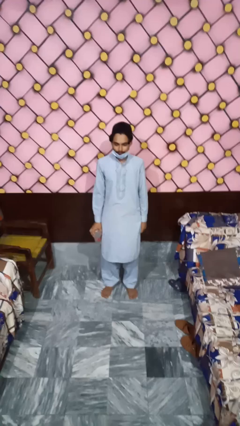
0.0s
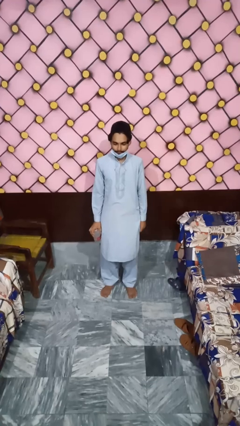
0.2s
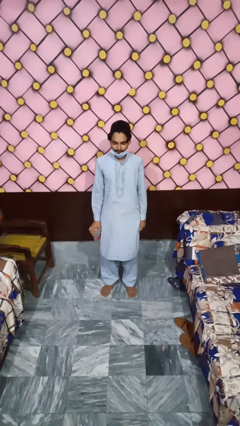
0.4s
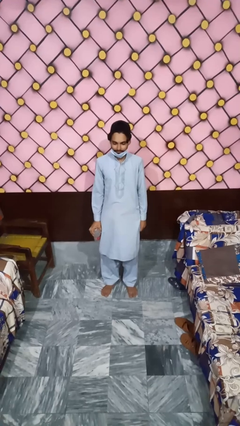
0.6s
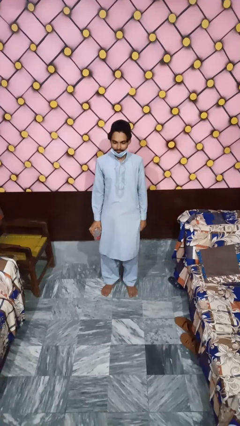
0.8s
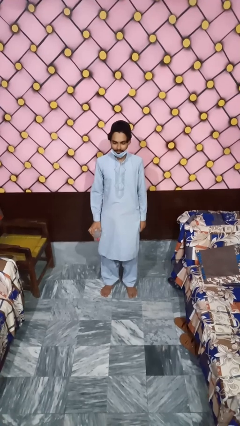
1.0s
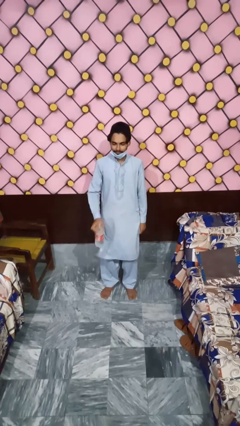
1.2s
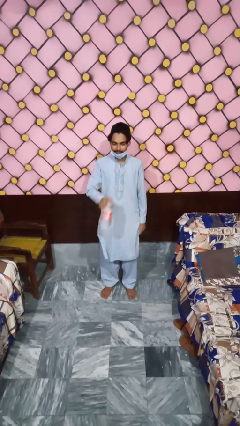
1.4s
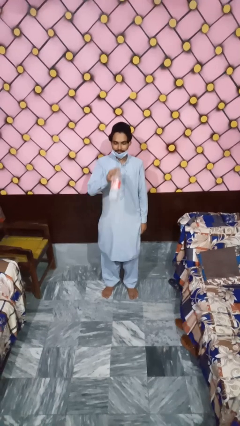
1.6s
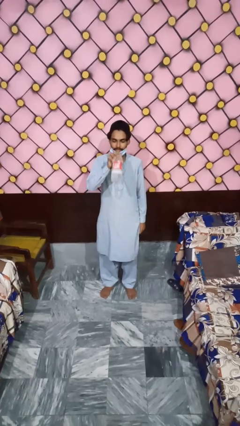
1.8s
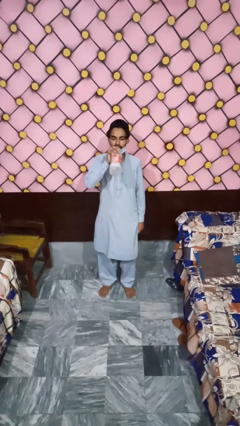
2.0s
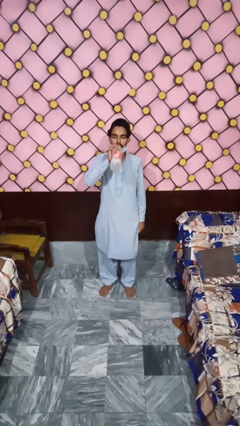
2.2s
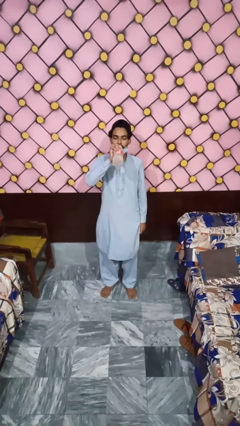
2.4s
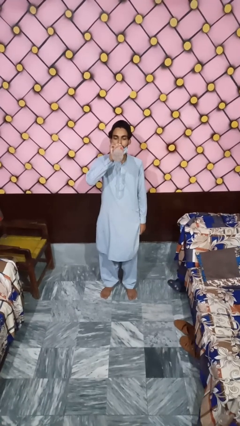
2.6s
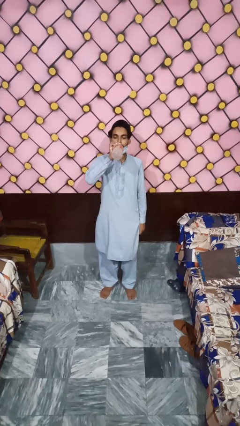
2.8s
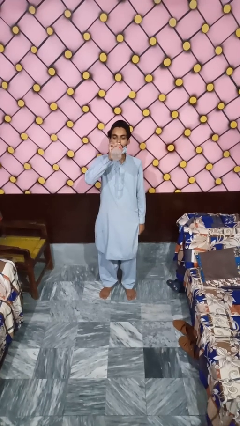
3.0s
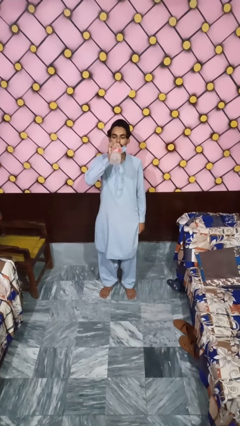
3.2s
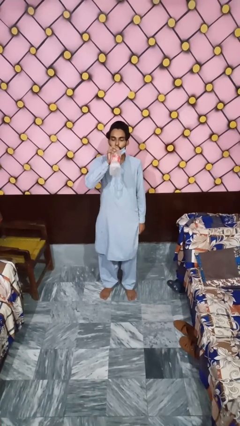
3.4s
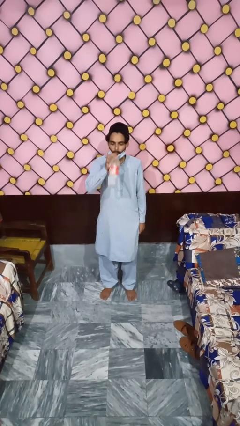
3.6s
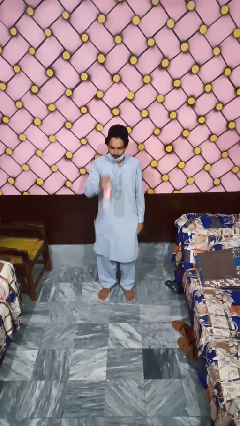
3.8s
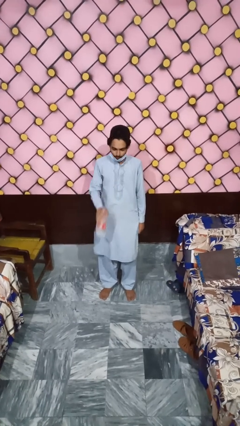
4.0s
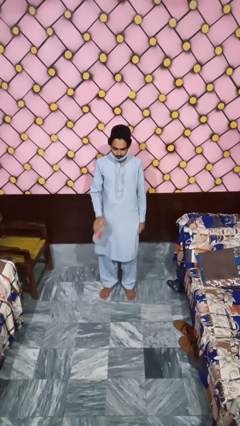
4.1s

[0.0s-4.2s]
person drinks from bottle

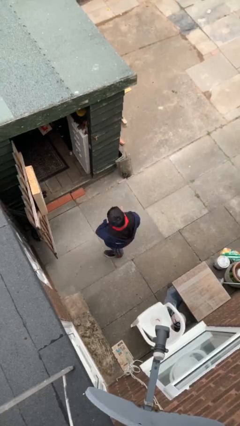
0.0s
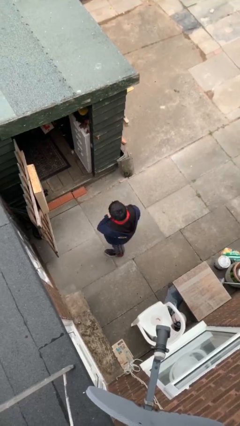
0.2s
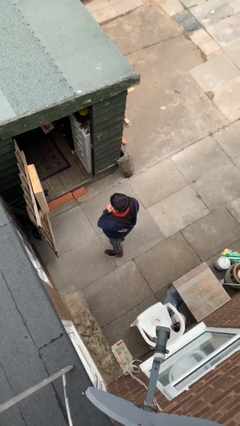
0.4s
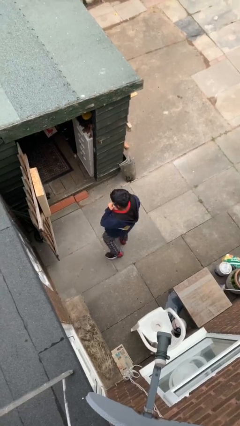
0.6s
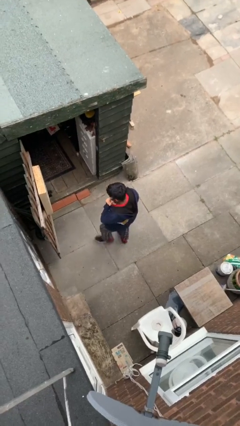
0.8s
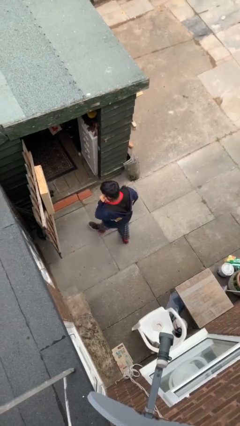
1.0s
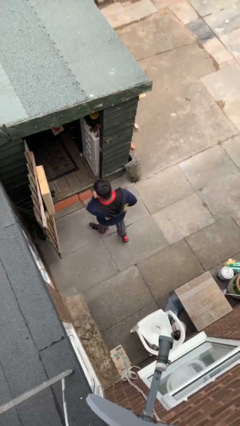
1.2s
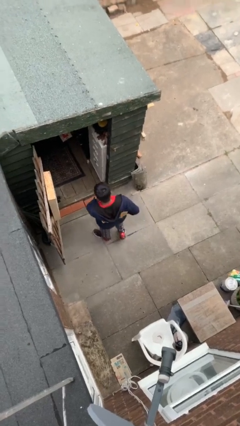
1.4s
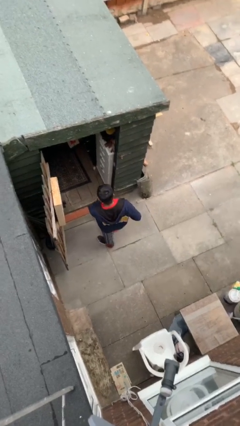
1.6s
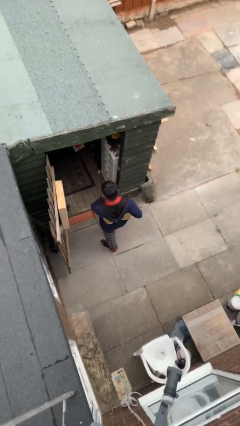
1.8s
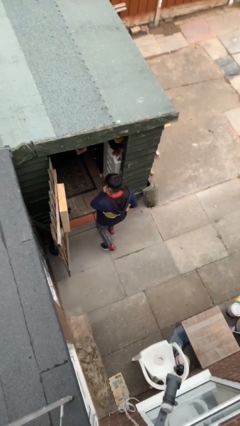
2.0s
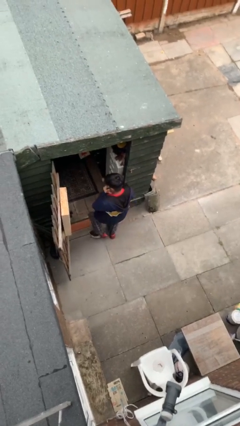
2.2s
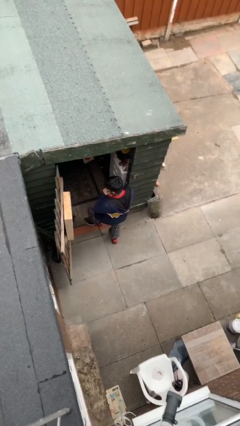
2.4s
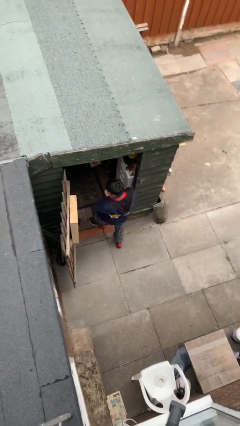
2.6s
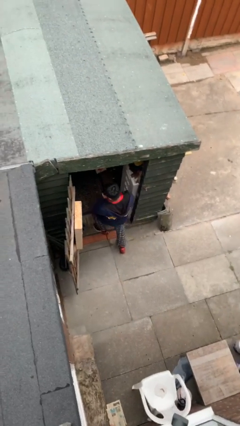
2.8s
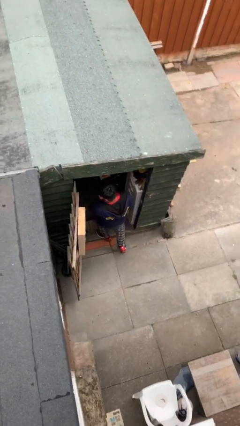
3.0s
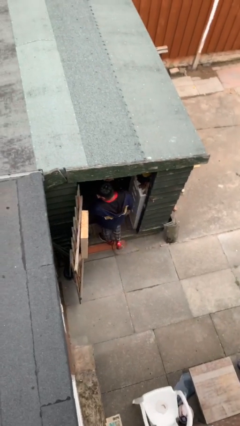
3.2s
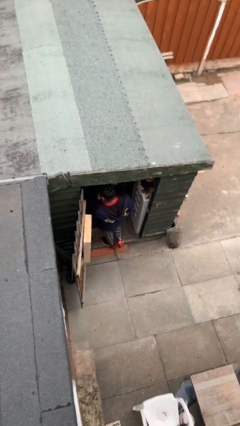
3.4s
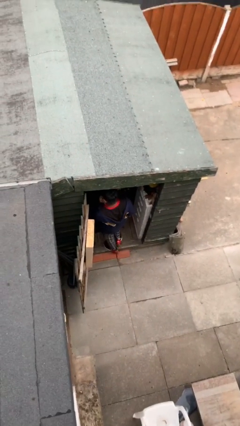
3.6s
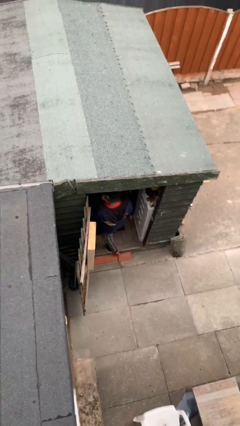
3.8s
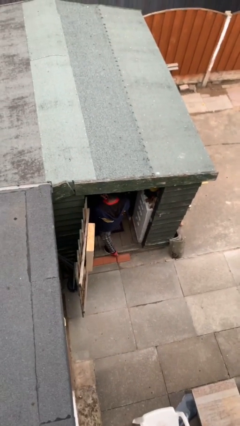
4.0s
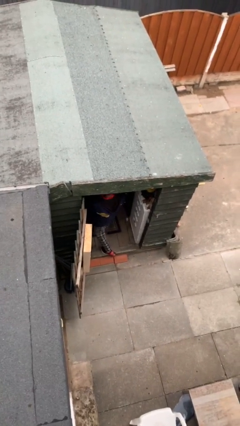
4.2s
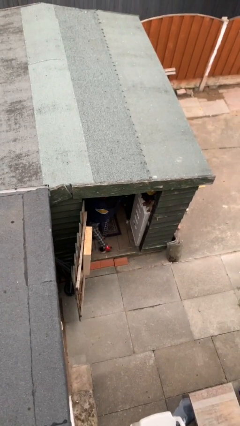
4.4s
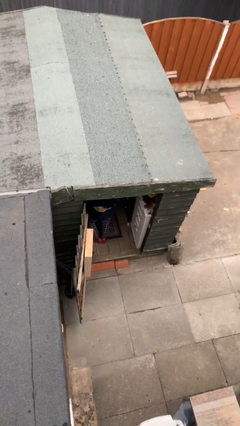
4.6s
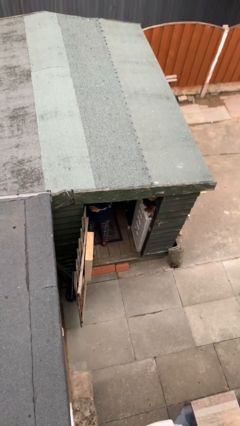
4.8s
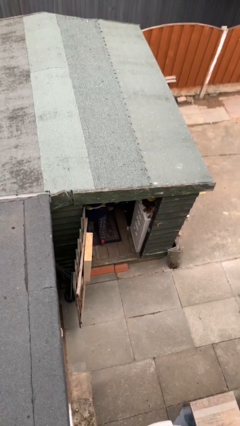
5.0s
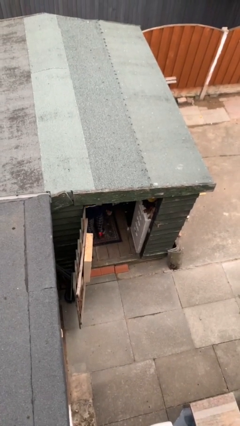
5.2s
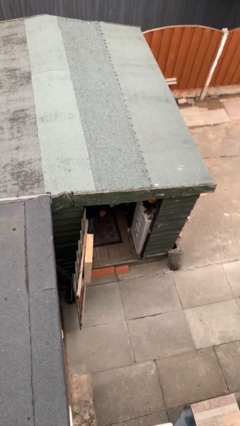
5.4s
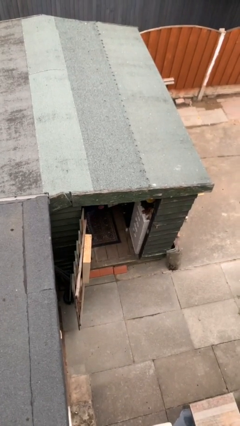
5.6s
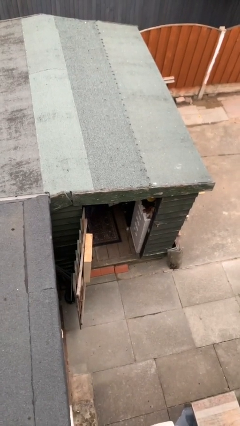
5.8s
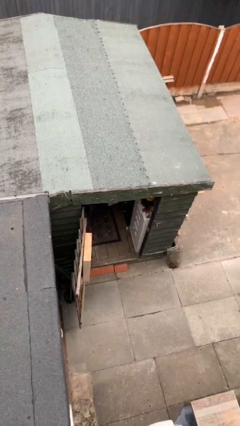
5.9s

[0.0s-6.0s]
person exits scene through structure

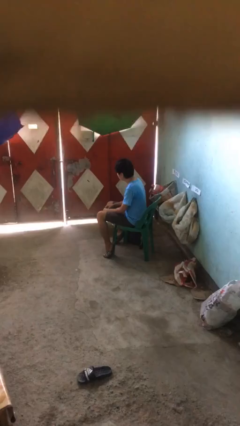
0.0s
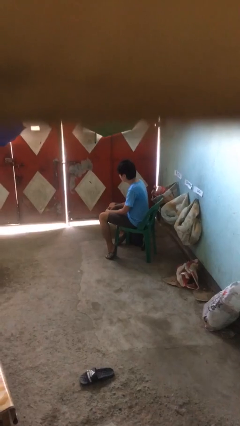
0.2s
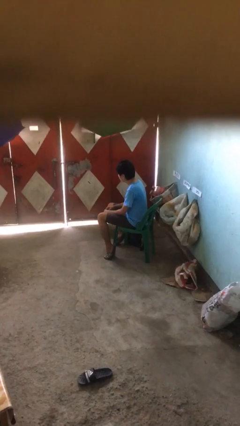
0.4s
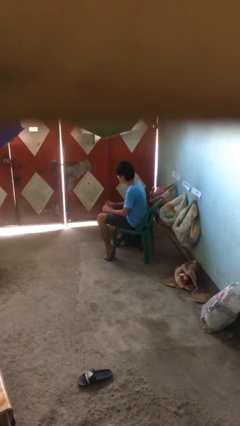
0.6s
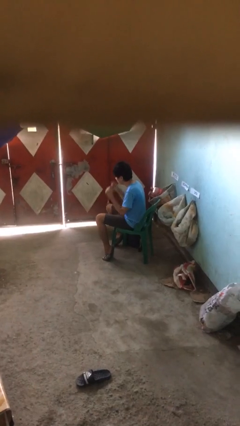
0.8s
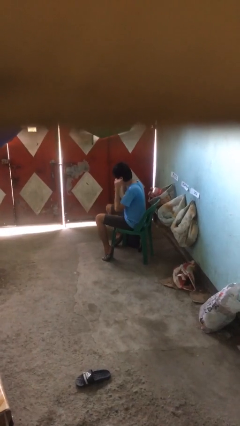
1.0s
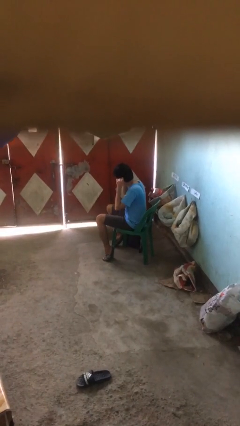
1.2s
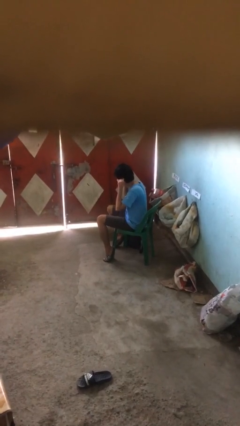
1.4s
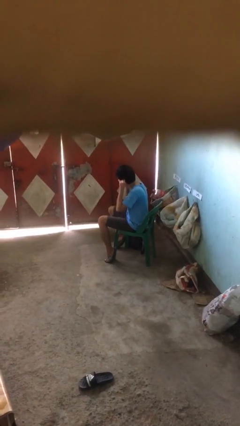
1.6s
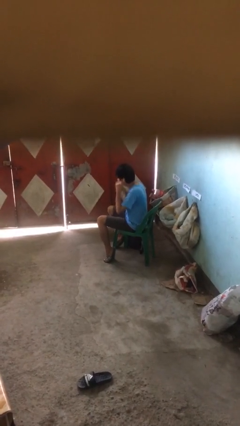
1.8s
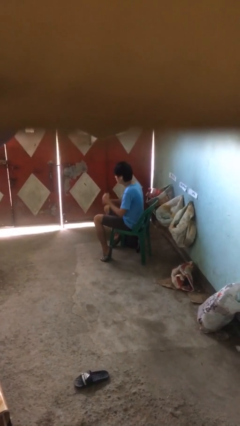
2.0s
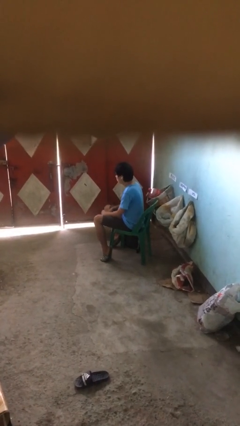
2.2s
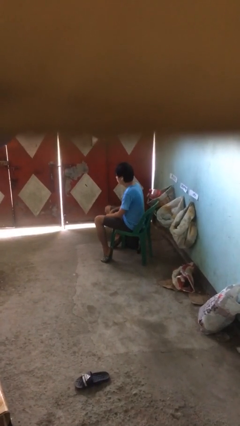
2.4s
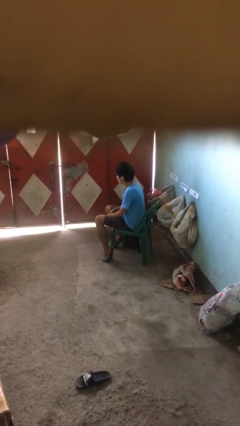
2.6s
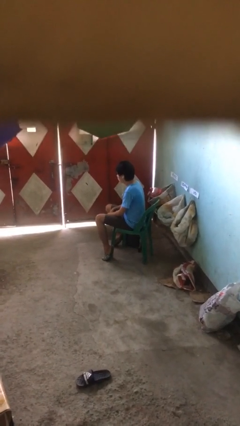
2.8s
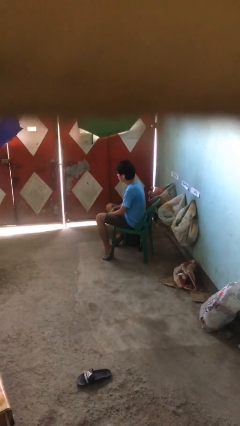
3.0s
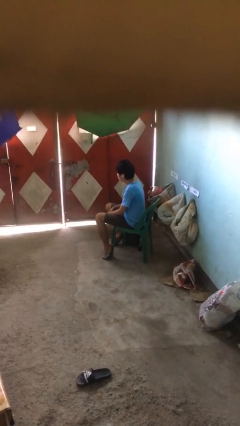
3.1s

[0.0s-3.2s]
person puts on headphones

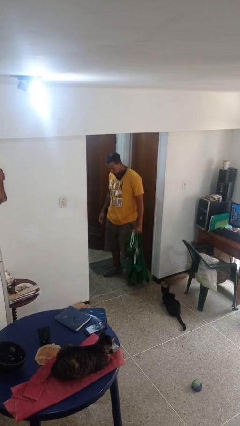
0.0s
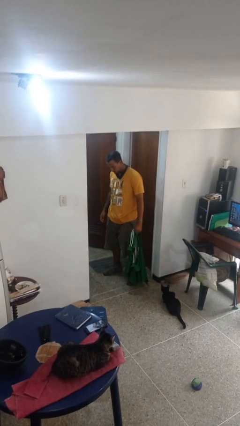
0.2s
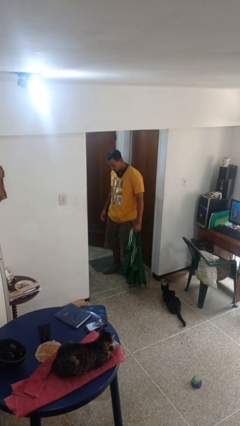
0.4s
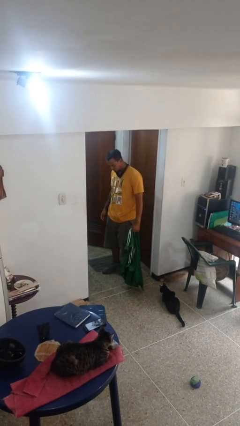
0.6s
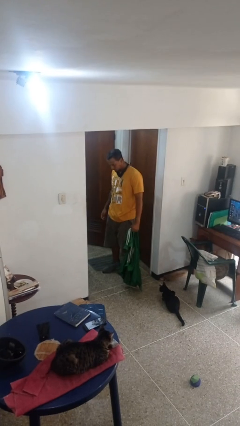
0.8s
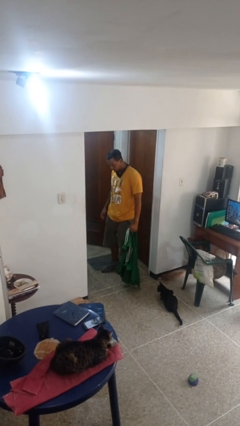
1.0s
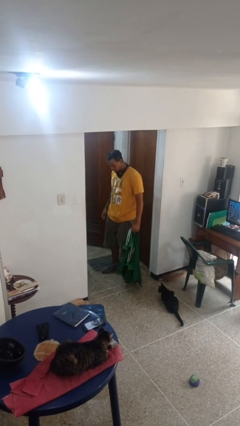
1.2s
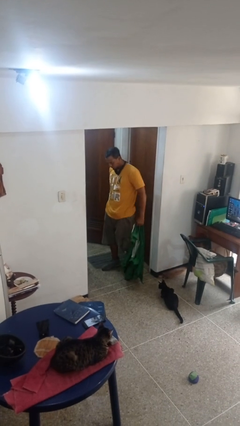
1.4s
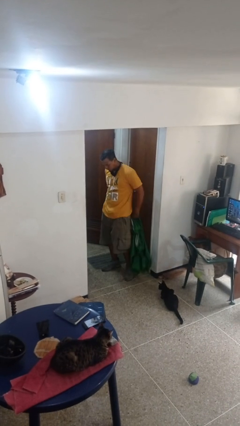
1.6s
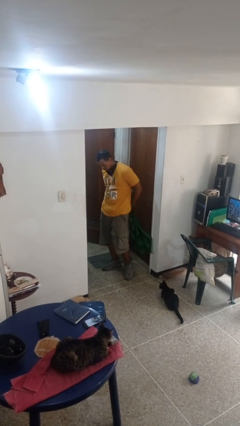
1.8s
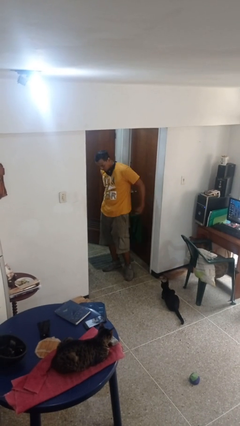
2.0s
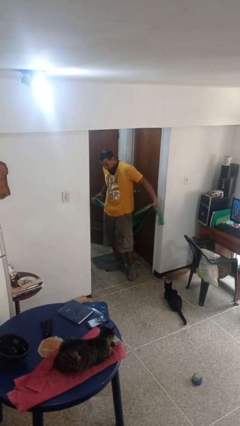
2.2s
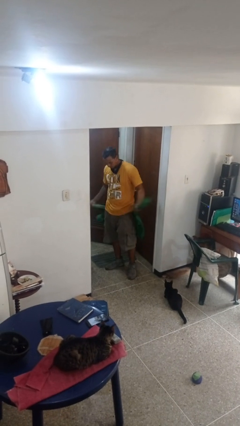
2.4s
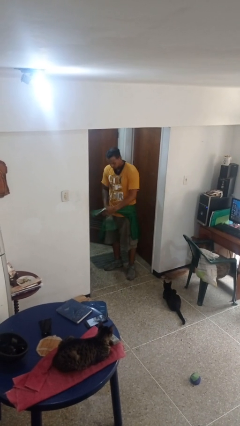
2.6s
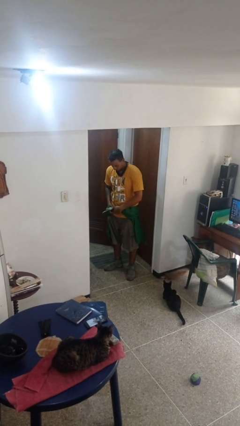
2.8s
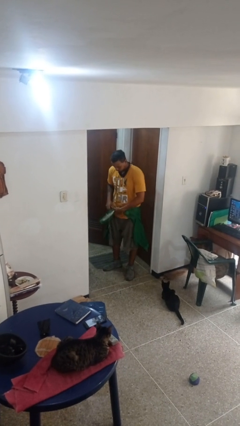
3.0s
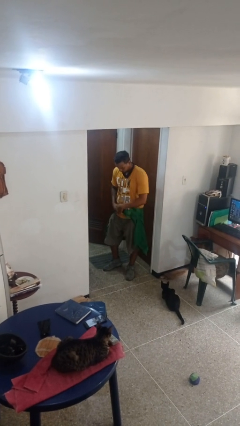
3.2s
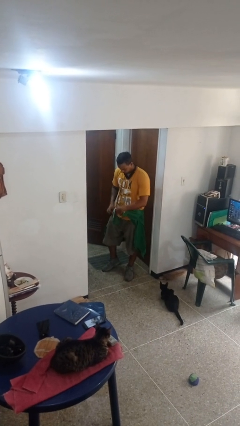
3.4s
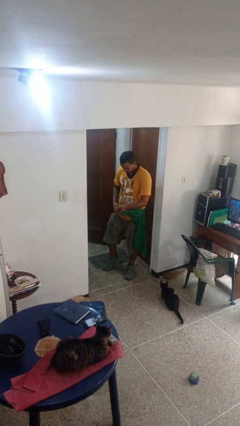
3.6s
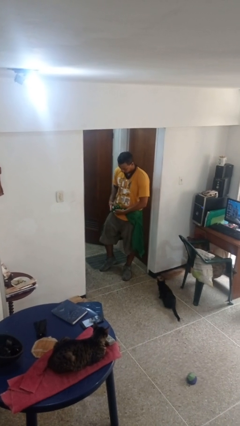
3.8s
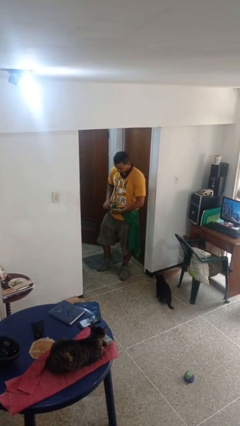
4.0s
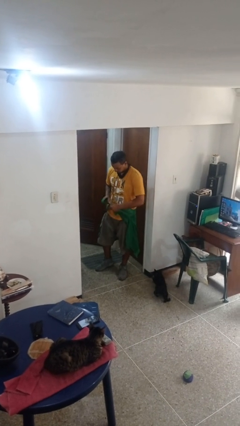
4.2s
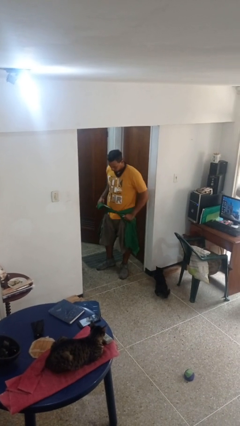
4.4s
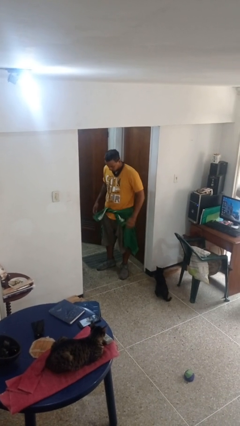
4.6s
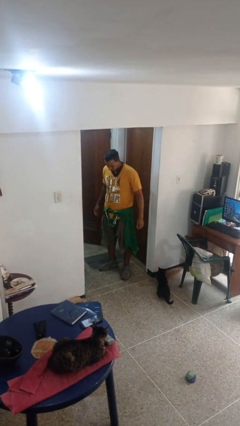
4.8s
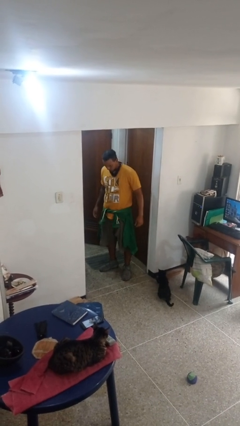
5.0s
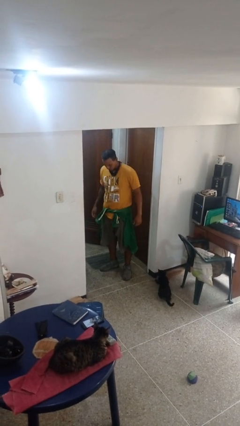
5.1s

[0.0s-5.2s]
person ties jacket around waist
